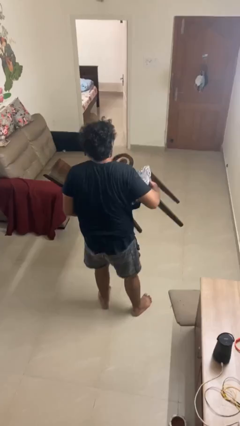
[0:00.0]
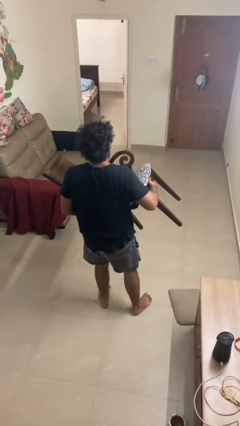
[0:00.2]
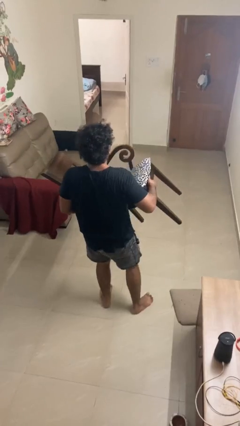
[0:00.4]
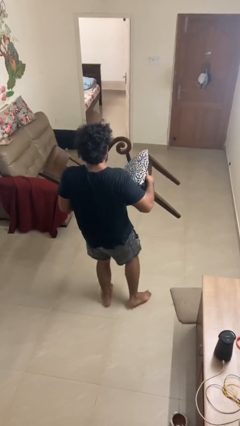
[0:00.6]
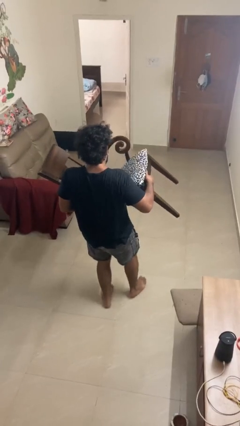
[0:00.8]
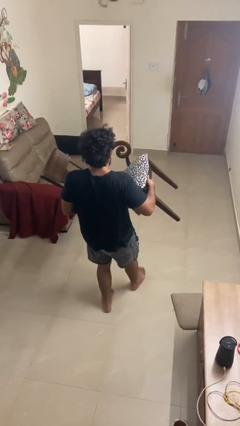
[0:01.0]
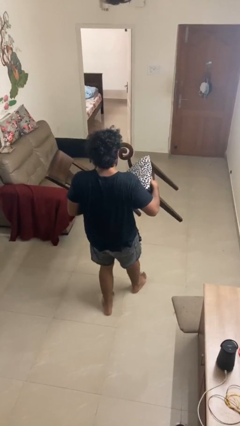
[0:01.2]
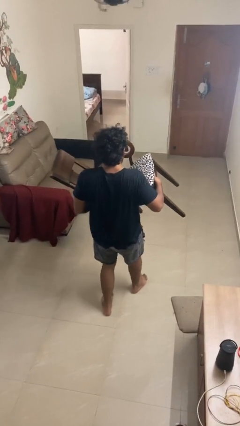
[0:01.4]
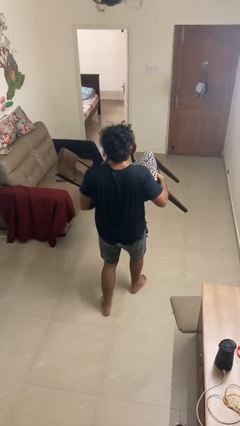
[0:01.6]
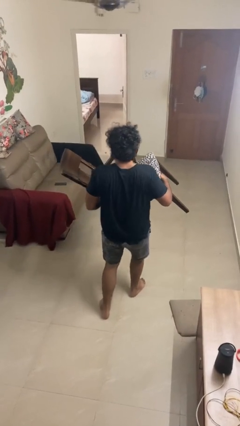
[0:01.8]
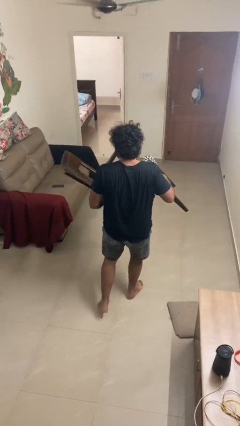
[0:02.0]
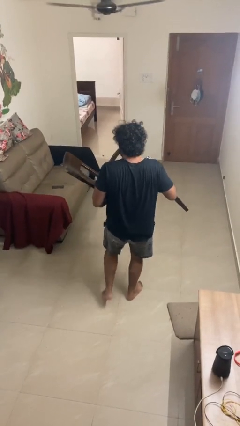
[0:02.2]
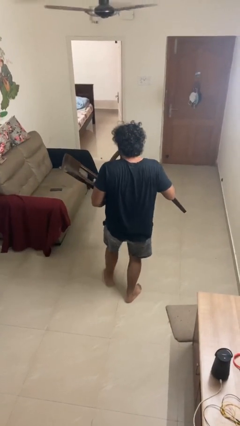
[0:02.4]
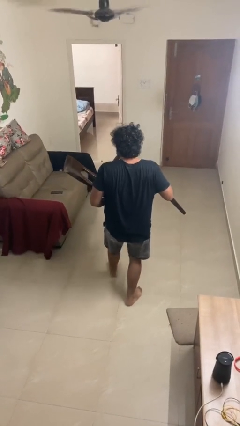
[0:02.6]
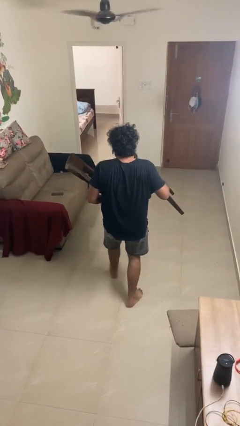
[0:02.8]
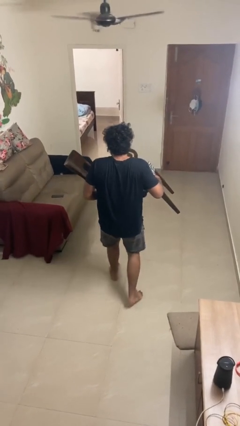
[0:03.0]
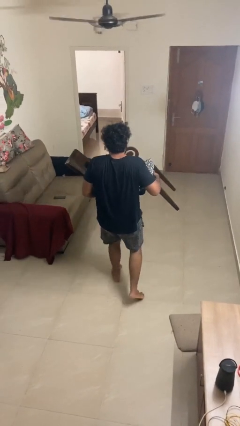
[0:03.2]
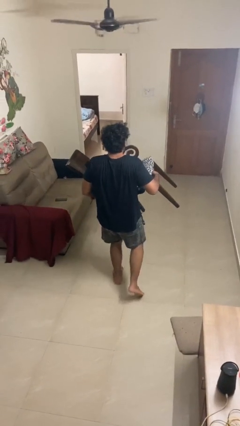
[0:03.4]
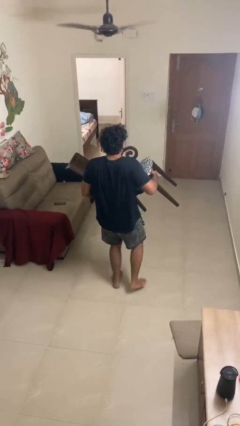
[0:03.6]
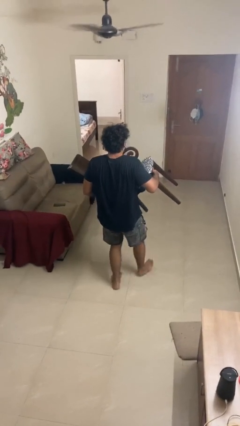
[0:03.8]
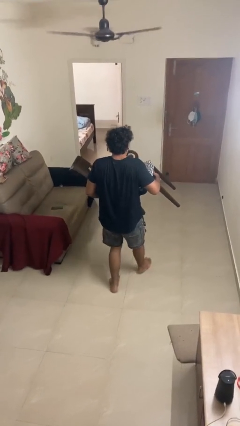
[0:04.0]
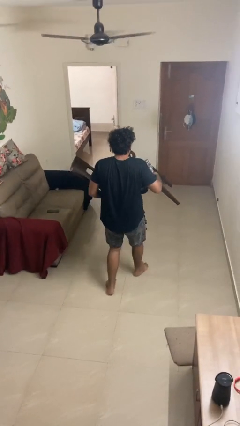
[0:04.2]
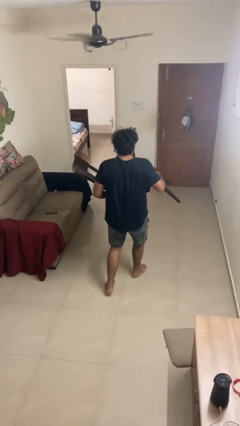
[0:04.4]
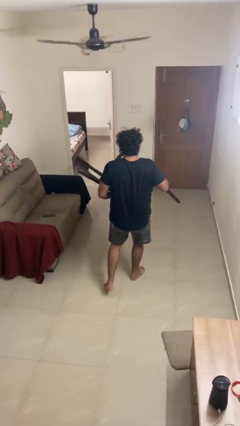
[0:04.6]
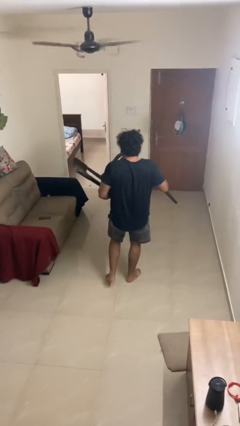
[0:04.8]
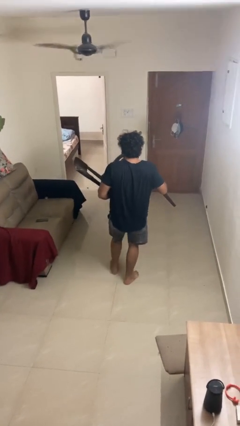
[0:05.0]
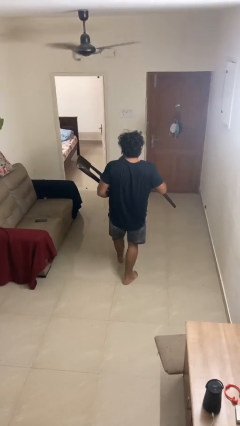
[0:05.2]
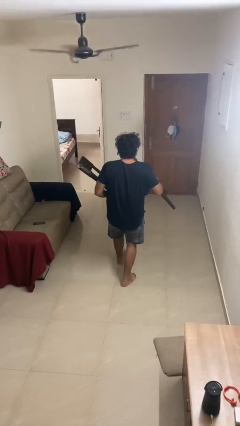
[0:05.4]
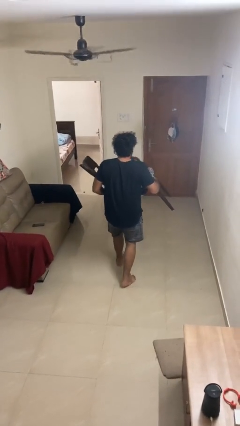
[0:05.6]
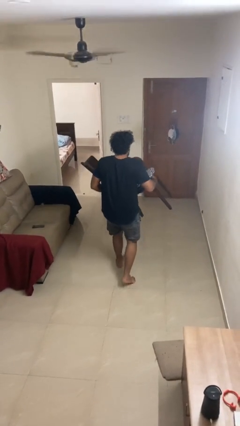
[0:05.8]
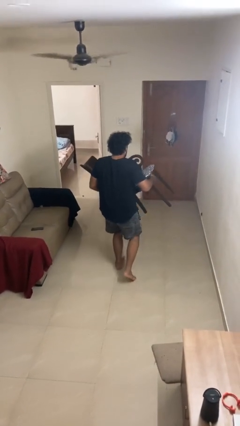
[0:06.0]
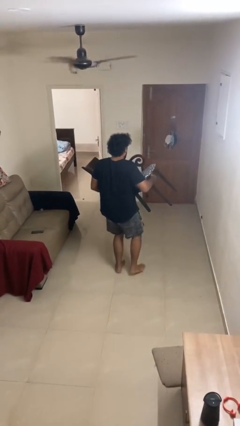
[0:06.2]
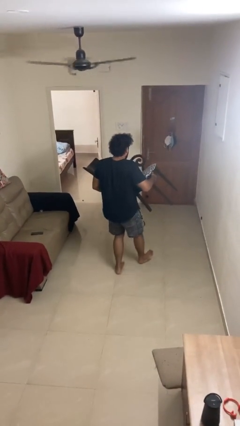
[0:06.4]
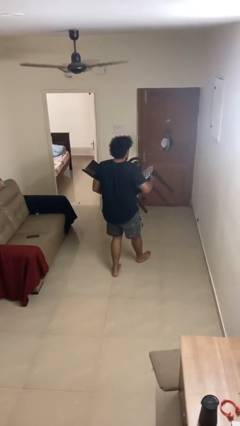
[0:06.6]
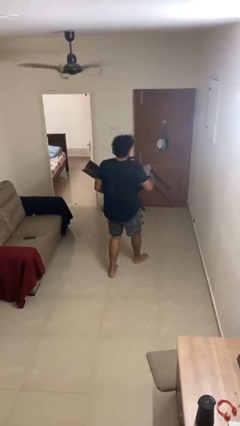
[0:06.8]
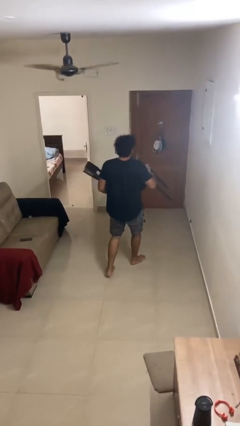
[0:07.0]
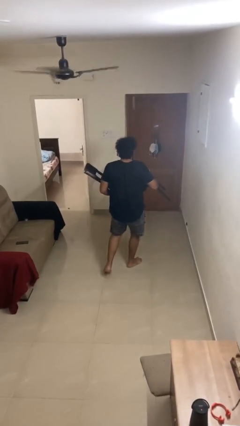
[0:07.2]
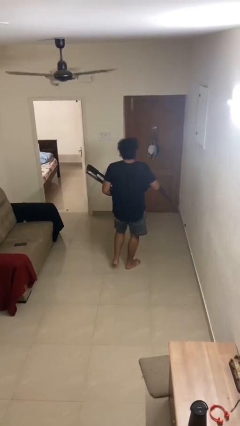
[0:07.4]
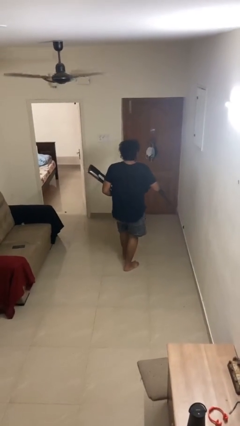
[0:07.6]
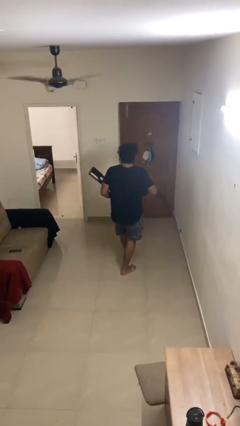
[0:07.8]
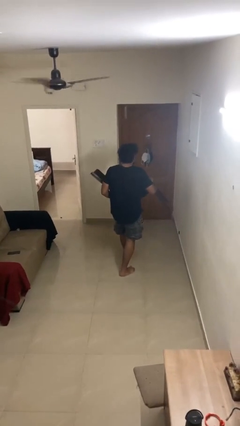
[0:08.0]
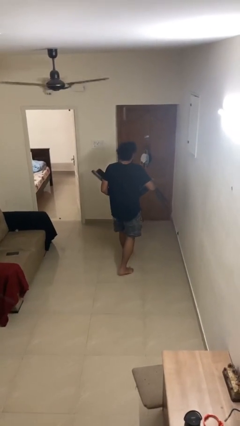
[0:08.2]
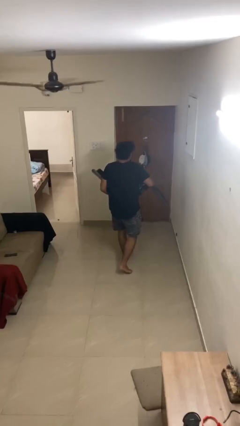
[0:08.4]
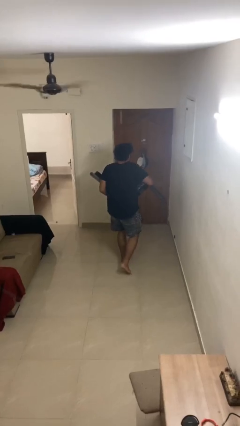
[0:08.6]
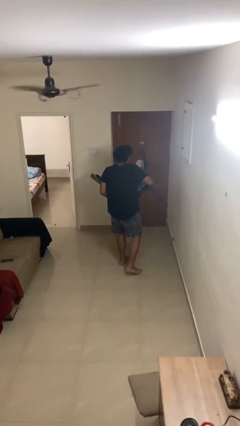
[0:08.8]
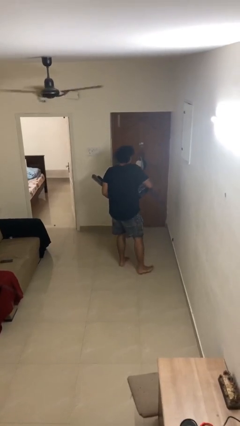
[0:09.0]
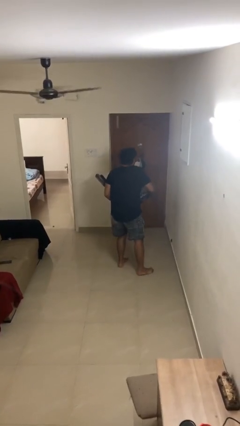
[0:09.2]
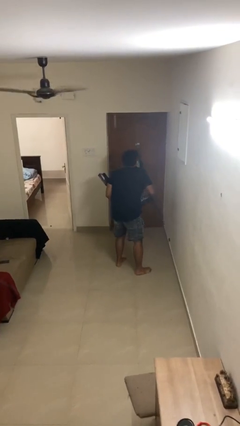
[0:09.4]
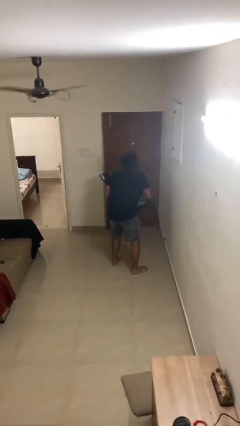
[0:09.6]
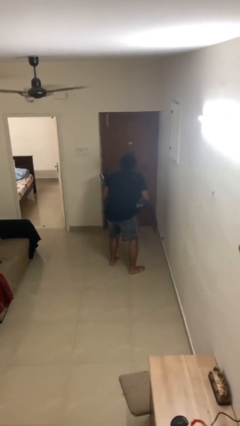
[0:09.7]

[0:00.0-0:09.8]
person carries heavy object

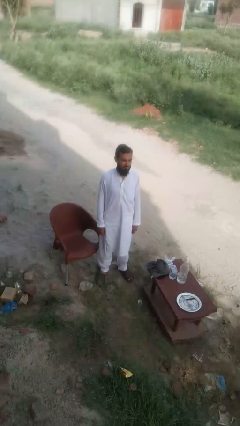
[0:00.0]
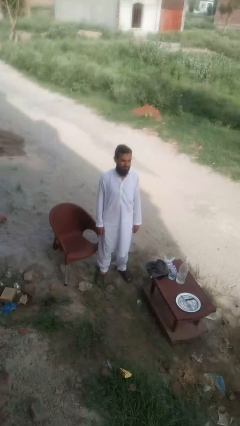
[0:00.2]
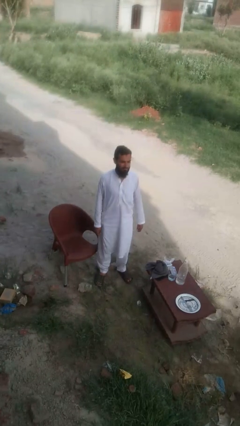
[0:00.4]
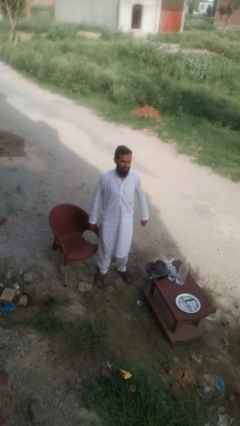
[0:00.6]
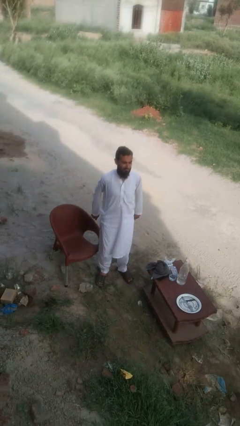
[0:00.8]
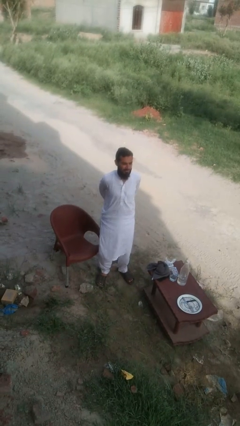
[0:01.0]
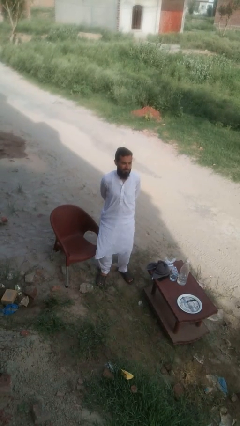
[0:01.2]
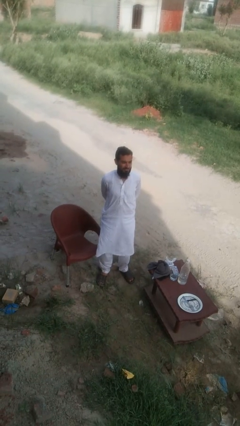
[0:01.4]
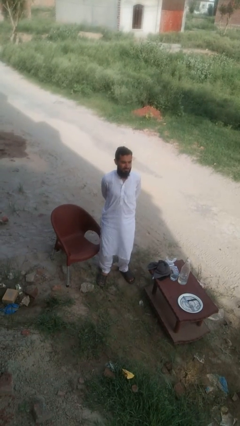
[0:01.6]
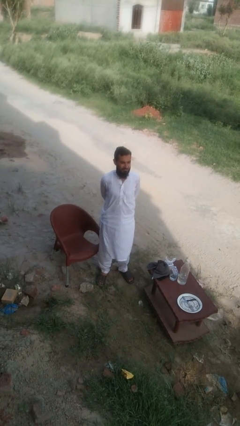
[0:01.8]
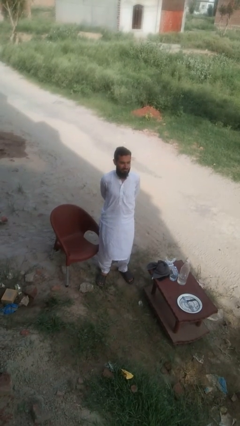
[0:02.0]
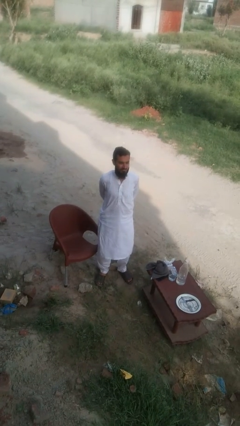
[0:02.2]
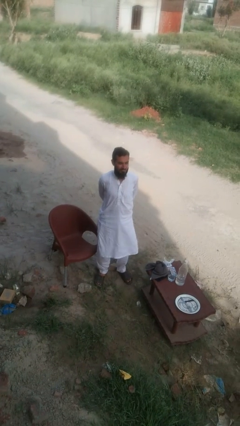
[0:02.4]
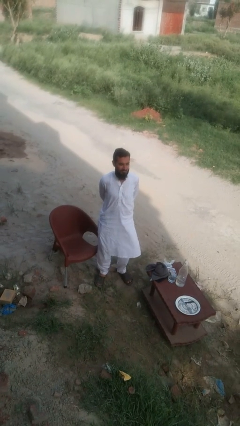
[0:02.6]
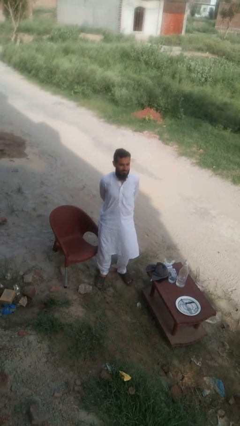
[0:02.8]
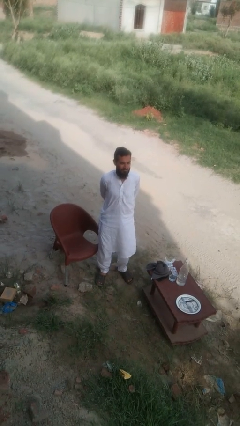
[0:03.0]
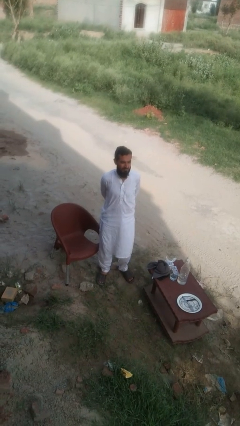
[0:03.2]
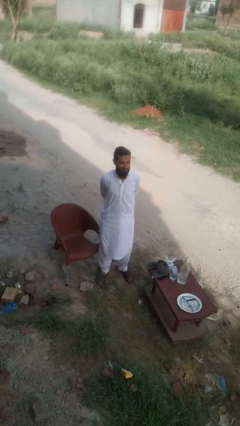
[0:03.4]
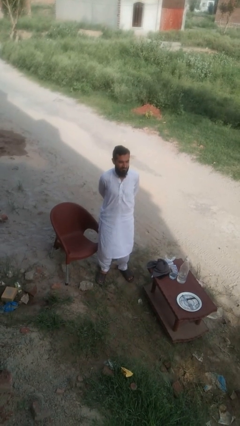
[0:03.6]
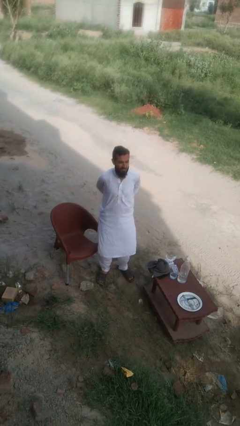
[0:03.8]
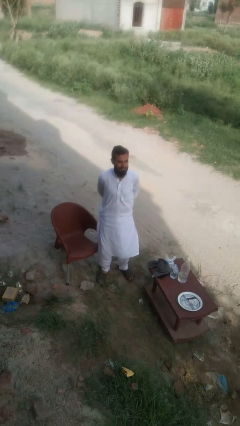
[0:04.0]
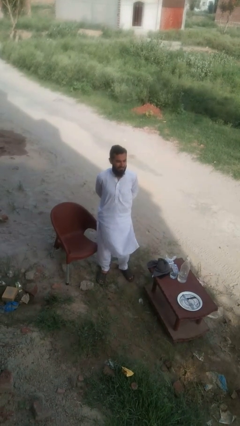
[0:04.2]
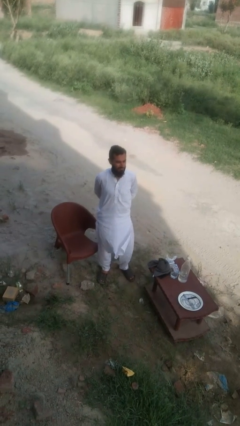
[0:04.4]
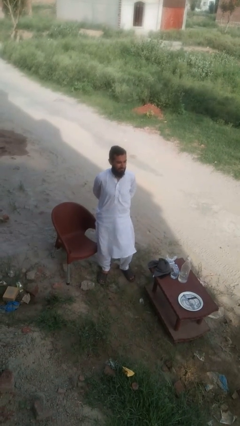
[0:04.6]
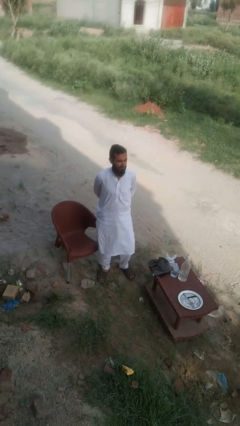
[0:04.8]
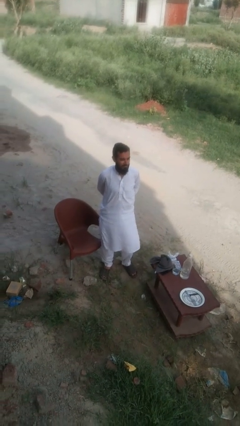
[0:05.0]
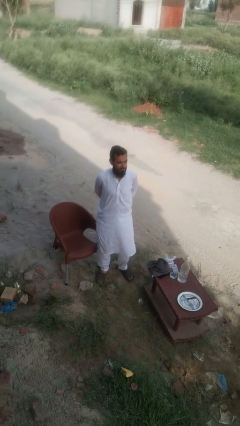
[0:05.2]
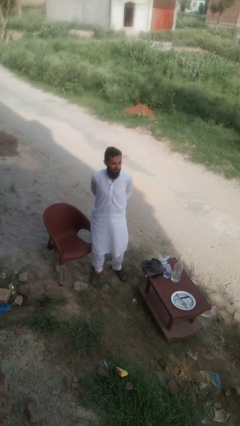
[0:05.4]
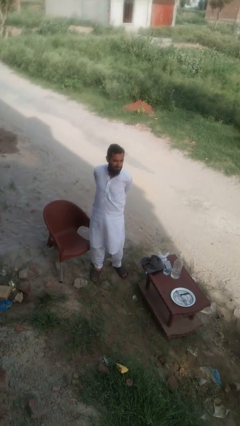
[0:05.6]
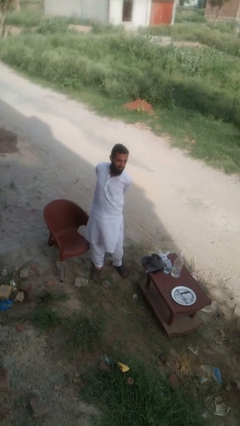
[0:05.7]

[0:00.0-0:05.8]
person stretches back

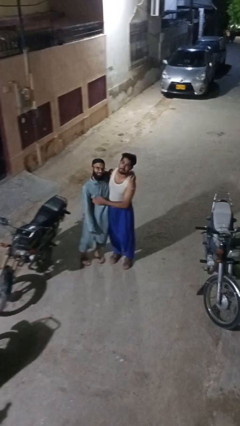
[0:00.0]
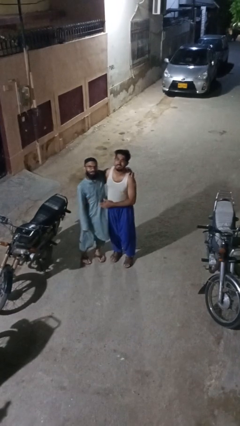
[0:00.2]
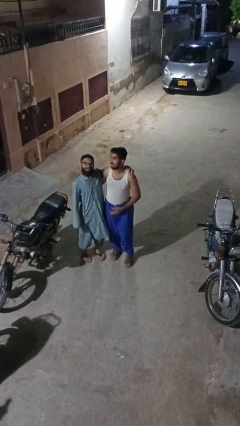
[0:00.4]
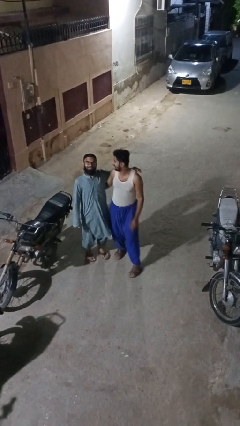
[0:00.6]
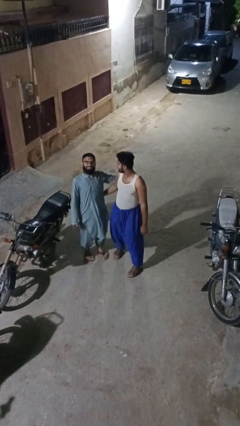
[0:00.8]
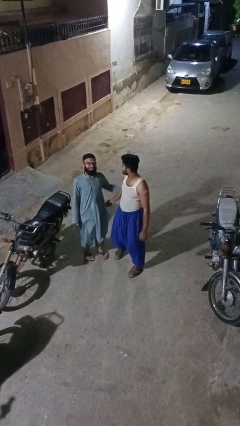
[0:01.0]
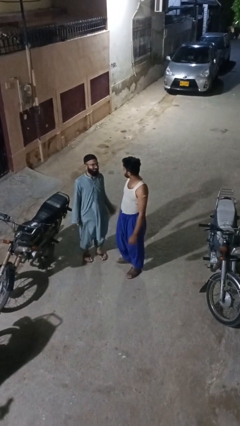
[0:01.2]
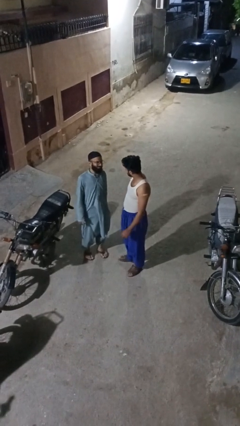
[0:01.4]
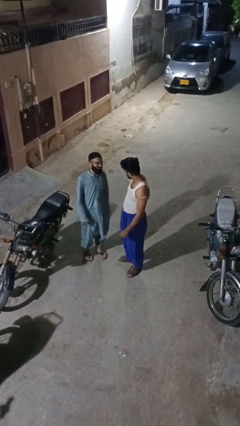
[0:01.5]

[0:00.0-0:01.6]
person picks up person

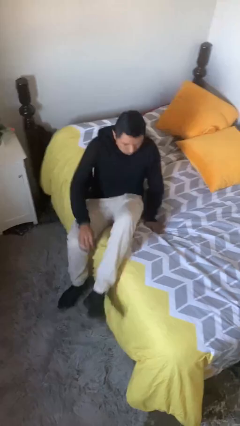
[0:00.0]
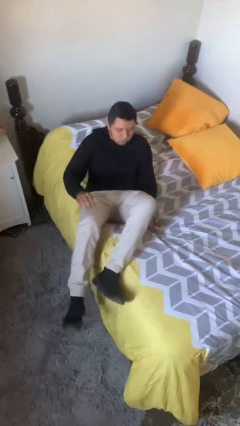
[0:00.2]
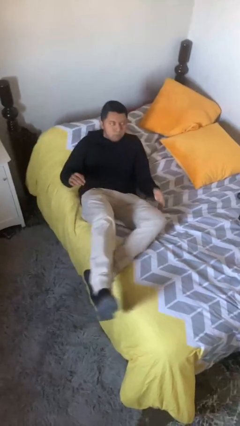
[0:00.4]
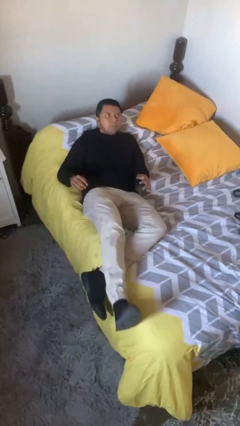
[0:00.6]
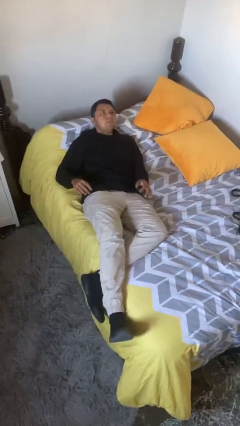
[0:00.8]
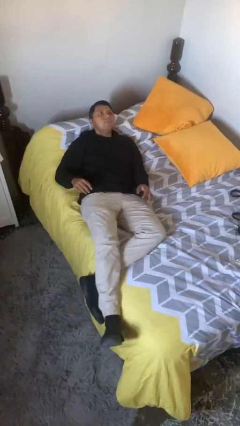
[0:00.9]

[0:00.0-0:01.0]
person lies down on bed
